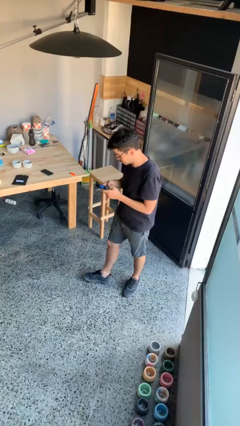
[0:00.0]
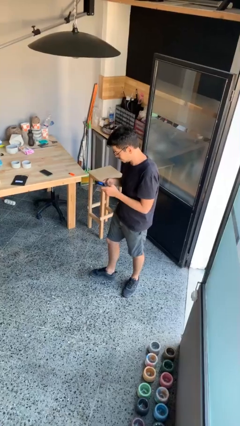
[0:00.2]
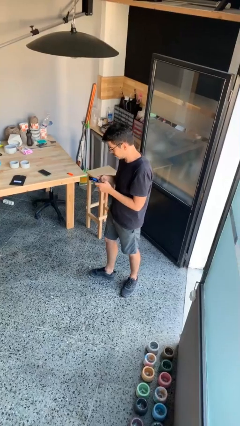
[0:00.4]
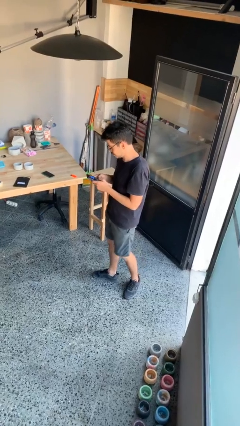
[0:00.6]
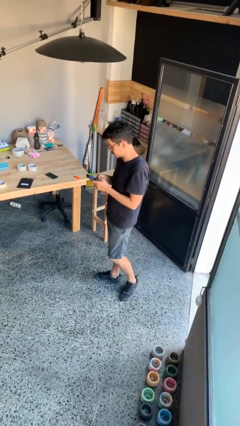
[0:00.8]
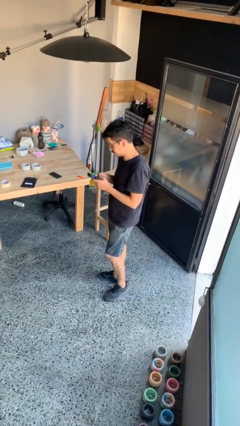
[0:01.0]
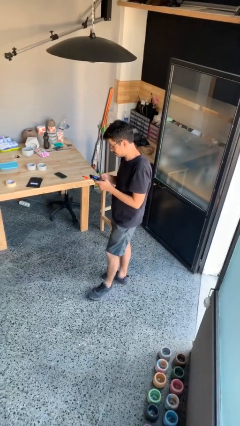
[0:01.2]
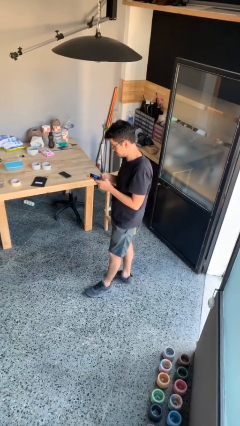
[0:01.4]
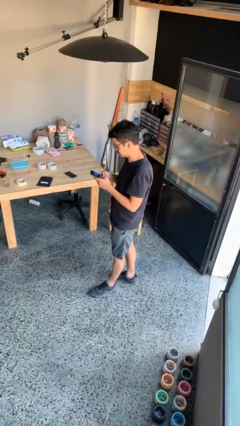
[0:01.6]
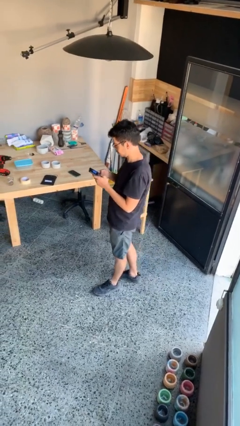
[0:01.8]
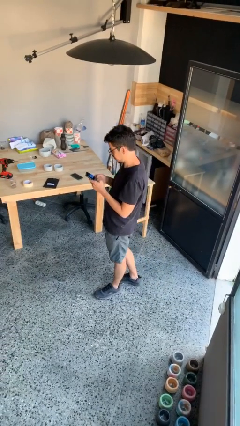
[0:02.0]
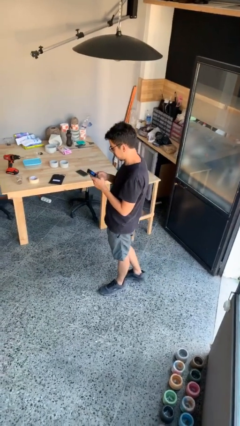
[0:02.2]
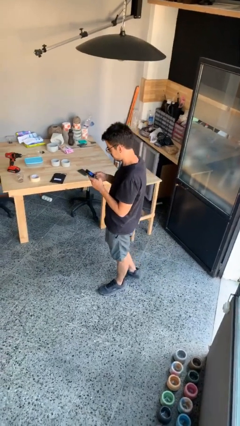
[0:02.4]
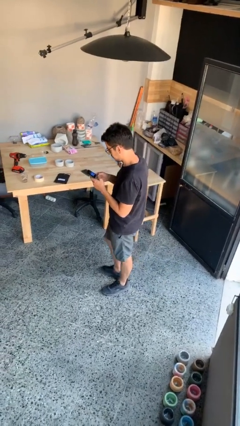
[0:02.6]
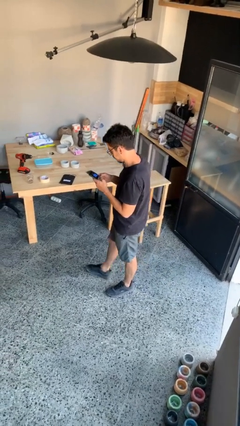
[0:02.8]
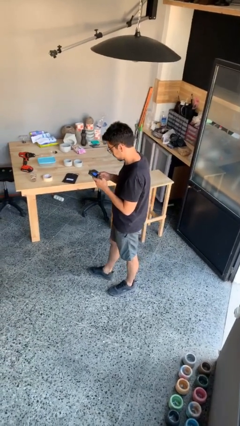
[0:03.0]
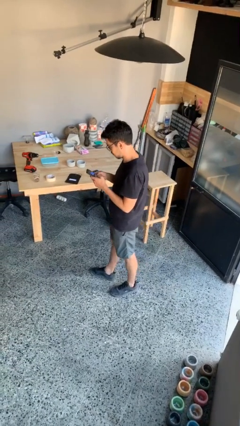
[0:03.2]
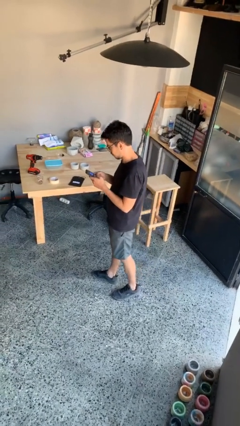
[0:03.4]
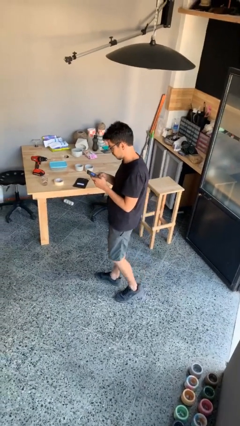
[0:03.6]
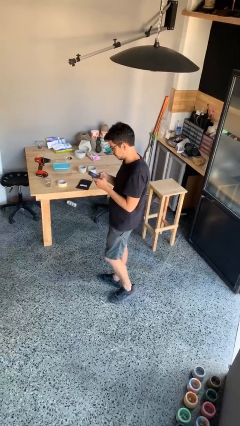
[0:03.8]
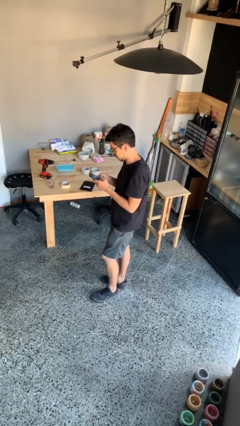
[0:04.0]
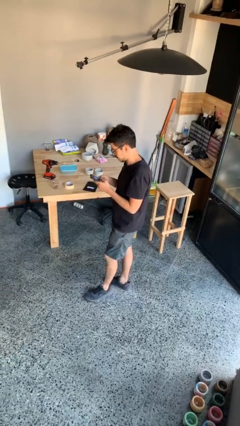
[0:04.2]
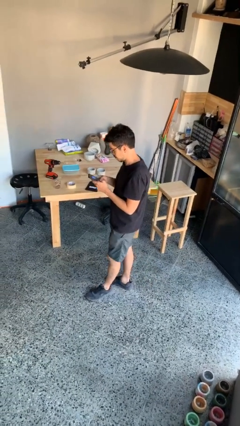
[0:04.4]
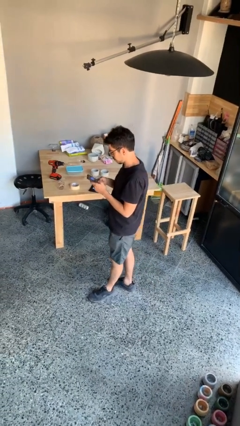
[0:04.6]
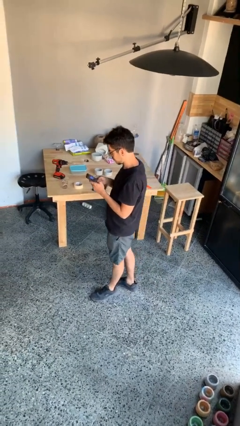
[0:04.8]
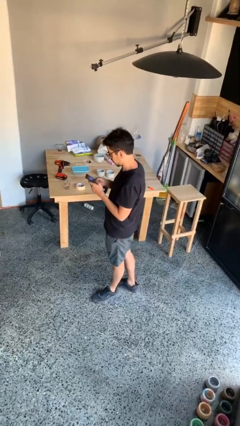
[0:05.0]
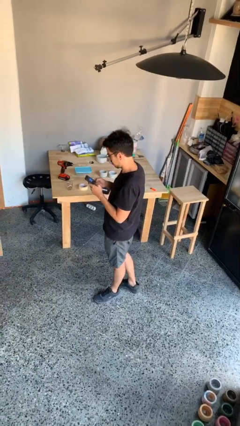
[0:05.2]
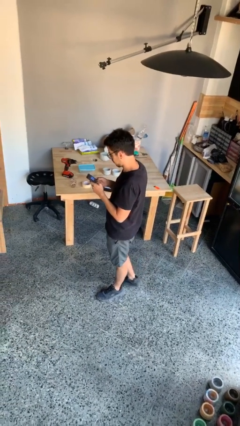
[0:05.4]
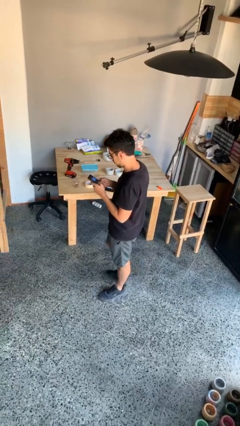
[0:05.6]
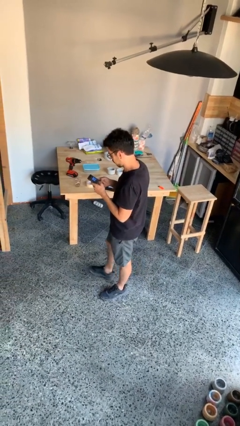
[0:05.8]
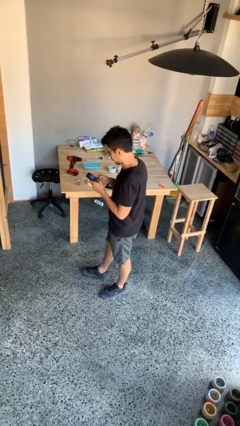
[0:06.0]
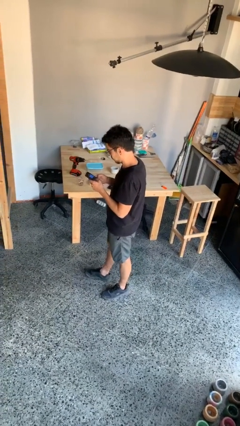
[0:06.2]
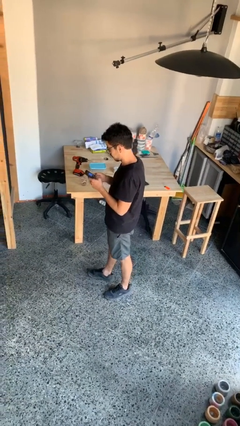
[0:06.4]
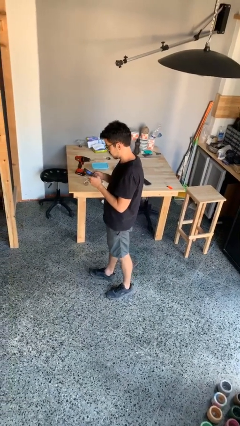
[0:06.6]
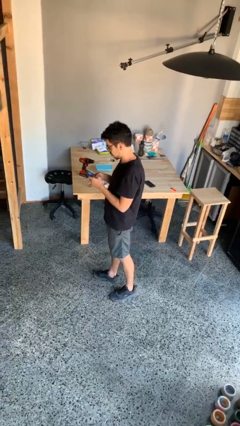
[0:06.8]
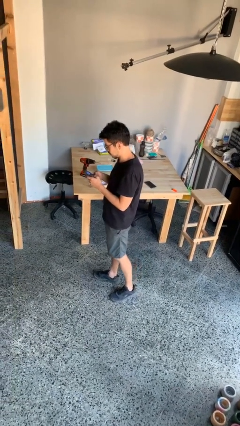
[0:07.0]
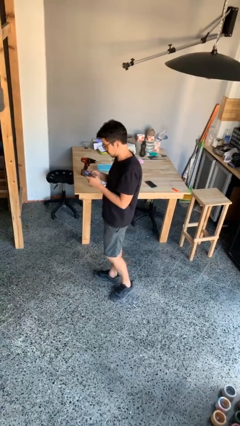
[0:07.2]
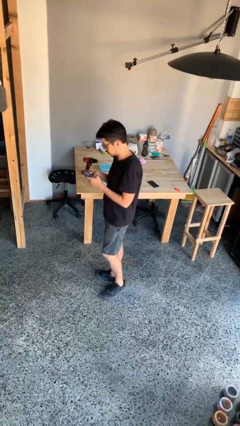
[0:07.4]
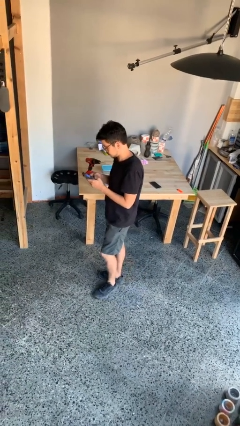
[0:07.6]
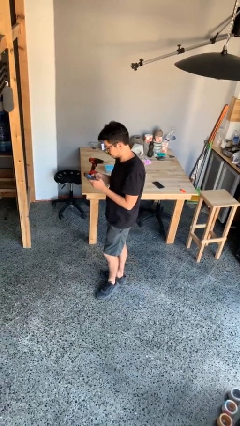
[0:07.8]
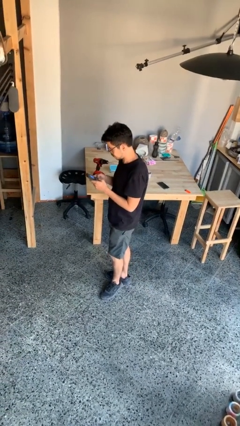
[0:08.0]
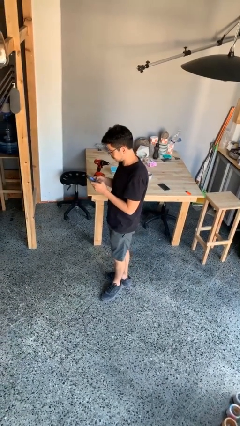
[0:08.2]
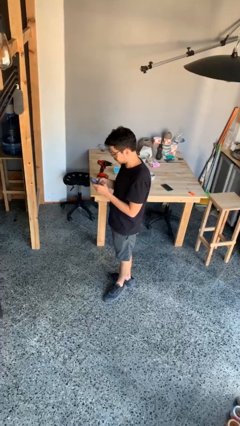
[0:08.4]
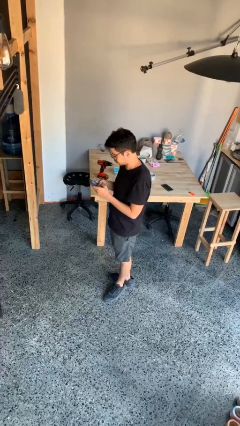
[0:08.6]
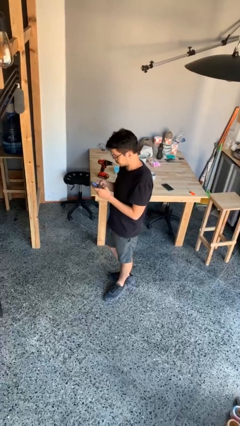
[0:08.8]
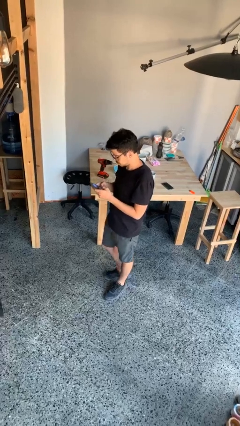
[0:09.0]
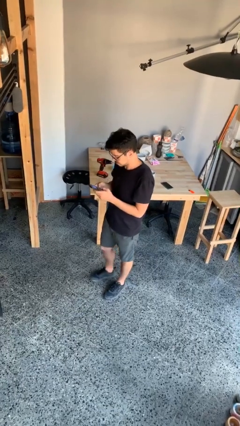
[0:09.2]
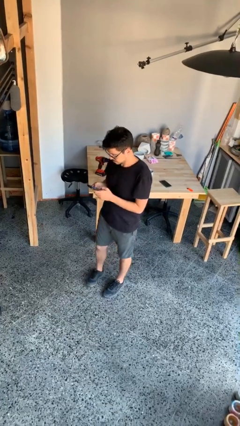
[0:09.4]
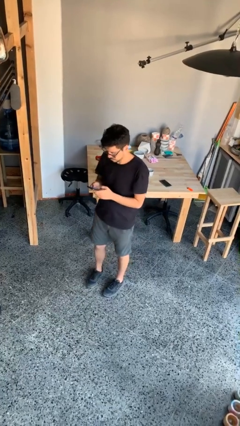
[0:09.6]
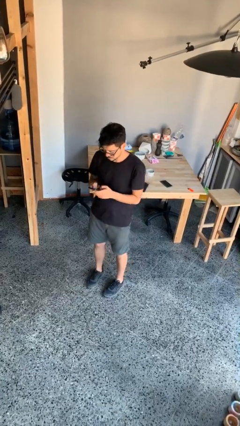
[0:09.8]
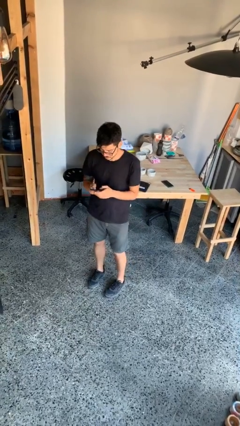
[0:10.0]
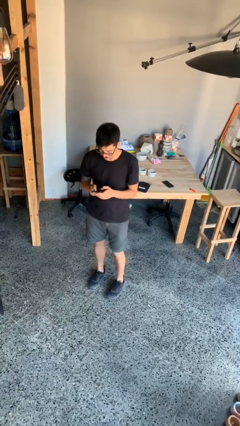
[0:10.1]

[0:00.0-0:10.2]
person texts on phone

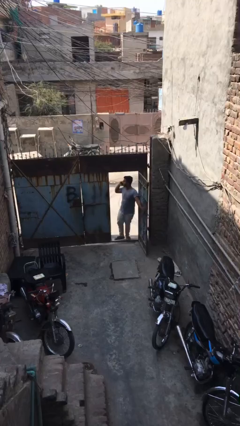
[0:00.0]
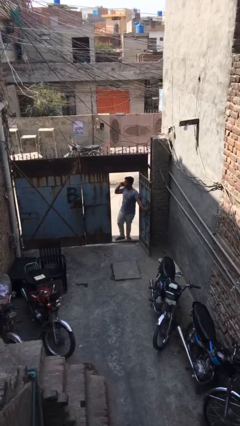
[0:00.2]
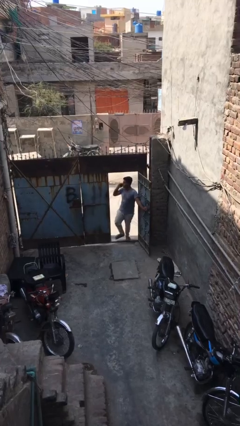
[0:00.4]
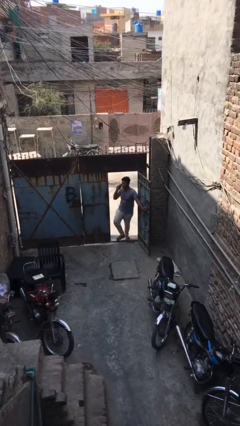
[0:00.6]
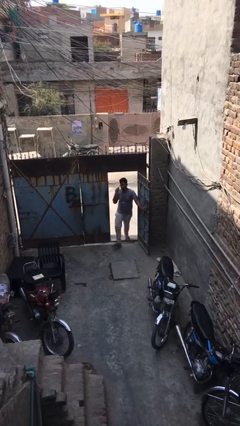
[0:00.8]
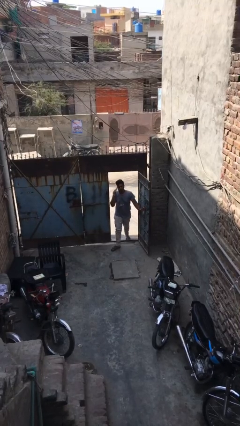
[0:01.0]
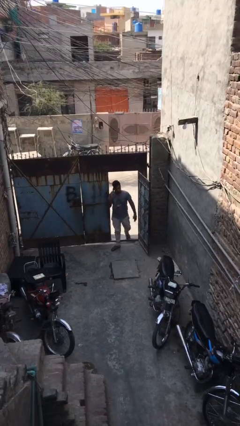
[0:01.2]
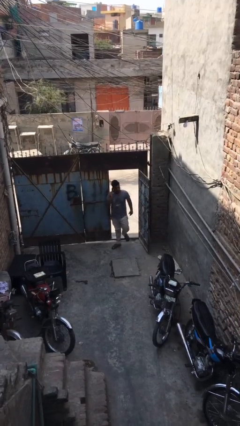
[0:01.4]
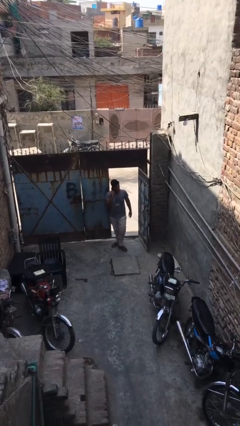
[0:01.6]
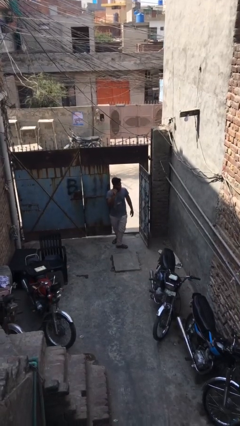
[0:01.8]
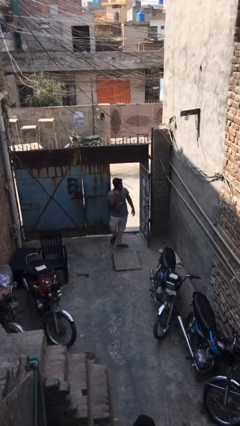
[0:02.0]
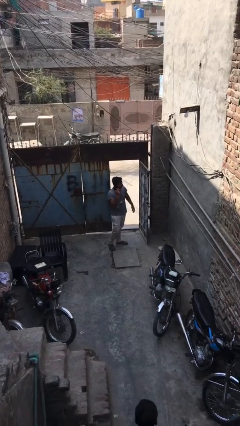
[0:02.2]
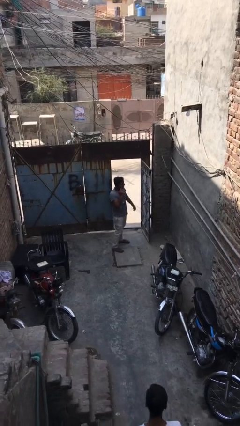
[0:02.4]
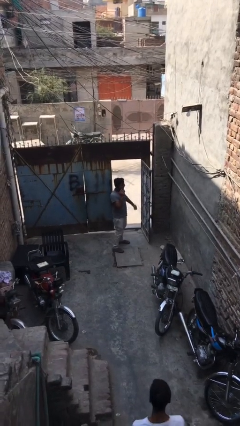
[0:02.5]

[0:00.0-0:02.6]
person enters scene through structure

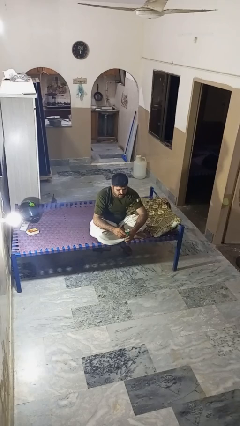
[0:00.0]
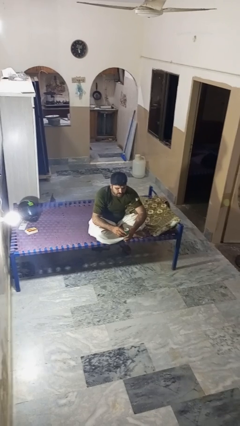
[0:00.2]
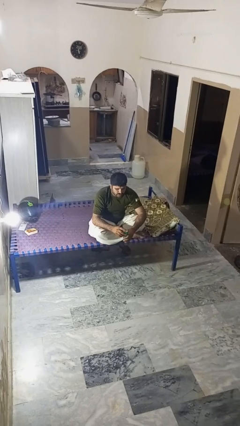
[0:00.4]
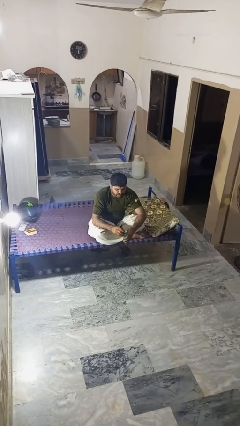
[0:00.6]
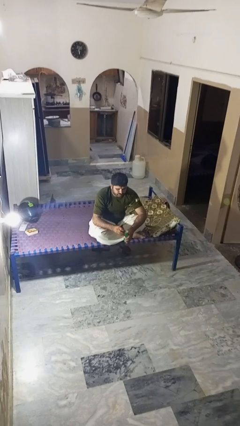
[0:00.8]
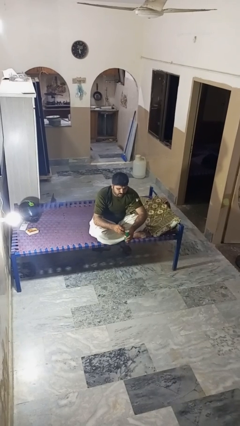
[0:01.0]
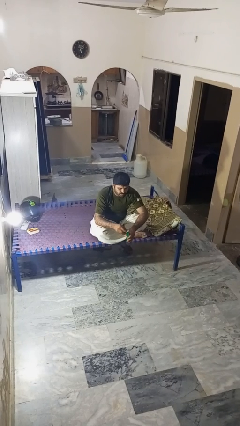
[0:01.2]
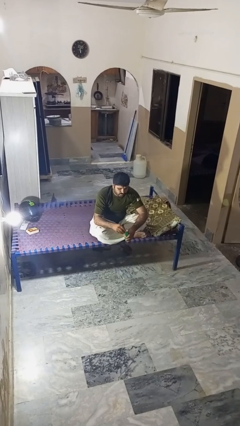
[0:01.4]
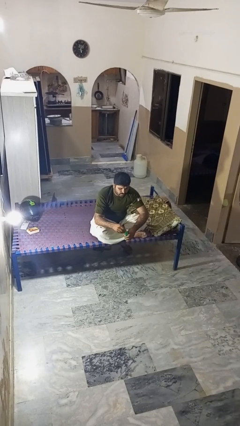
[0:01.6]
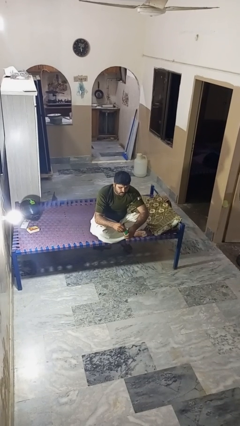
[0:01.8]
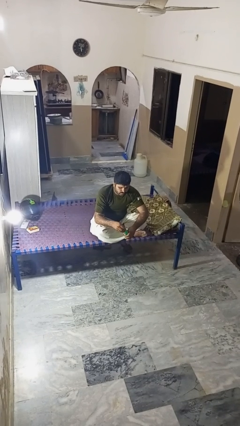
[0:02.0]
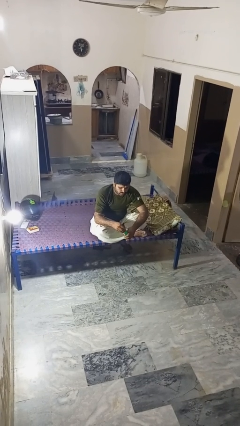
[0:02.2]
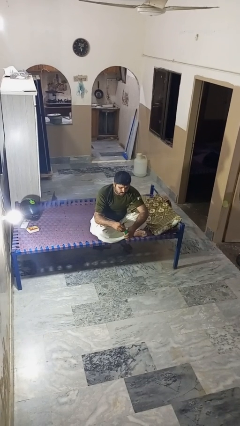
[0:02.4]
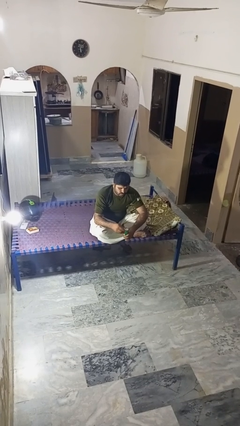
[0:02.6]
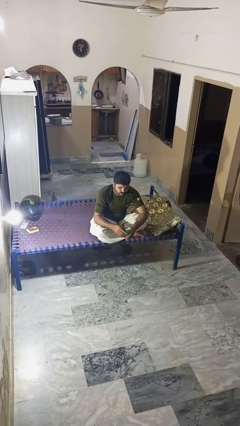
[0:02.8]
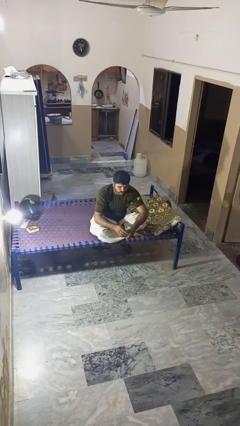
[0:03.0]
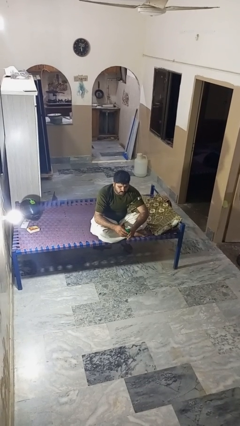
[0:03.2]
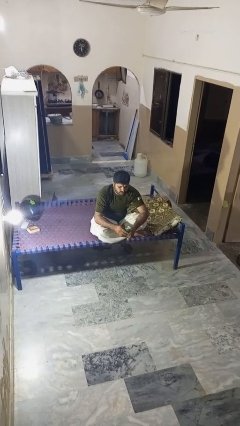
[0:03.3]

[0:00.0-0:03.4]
person opens beverage can

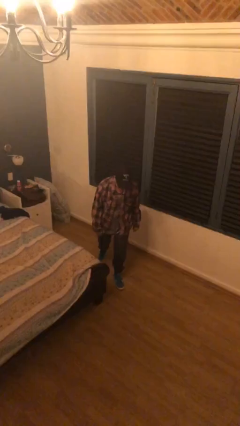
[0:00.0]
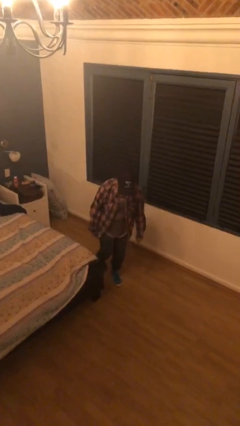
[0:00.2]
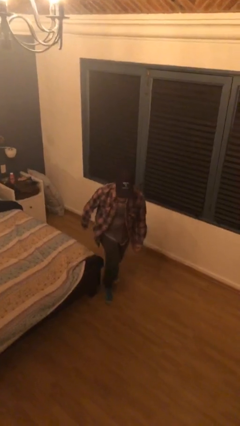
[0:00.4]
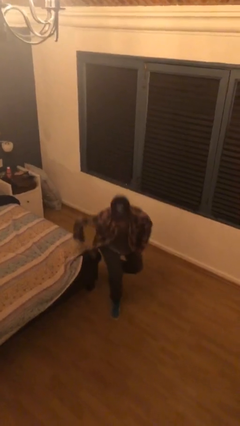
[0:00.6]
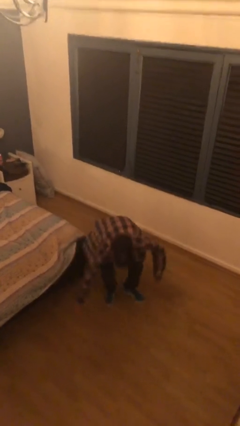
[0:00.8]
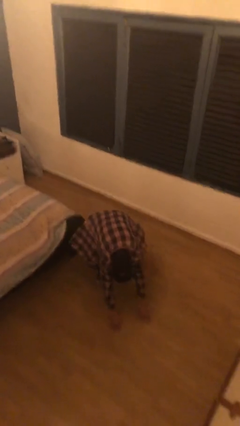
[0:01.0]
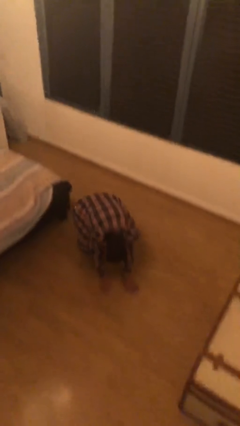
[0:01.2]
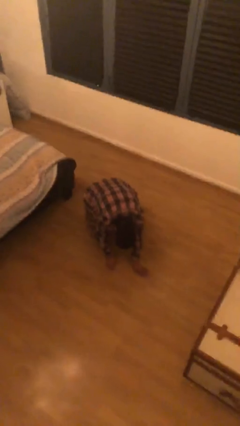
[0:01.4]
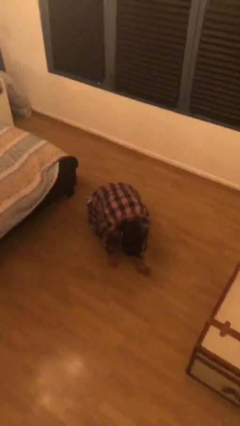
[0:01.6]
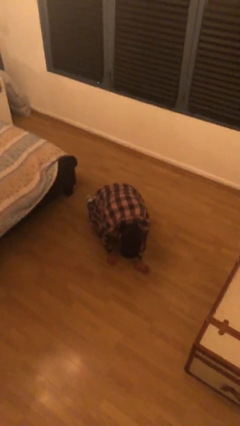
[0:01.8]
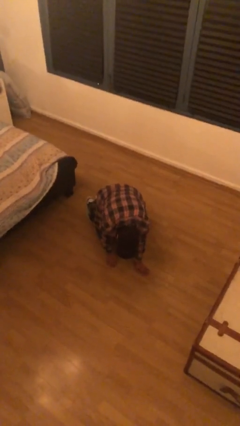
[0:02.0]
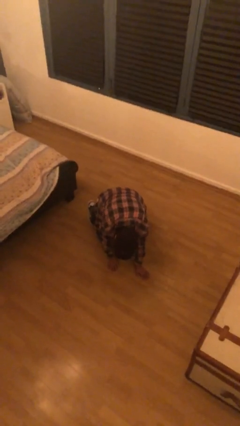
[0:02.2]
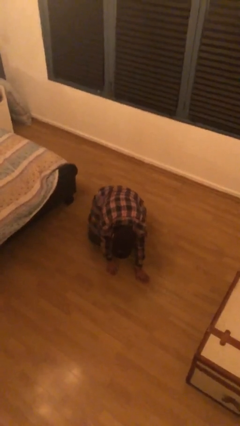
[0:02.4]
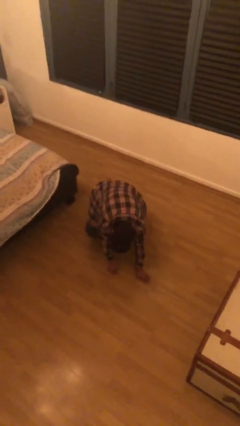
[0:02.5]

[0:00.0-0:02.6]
person trips on object on floor
